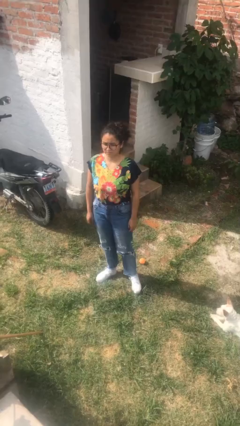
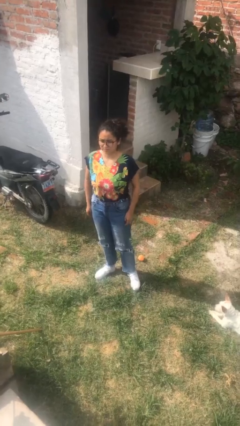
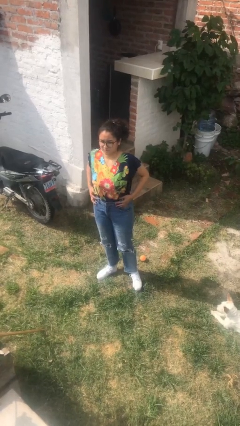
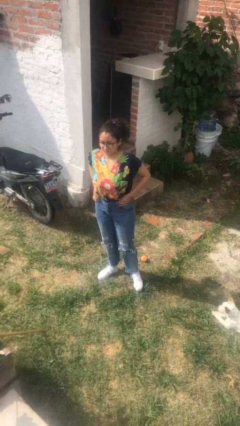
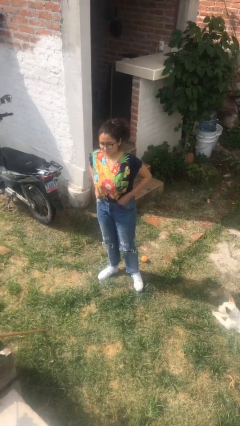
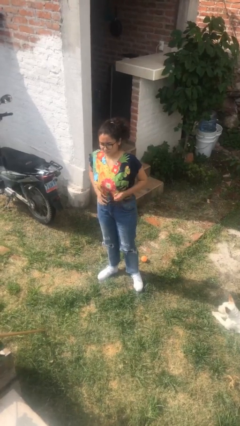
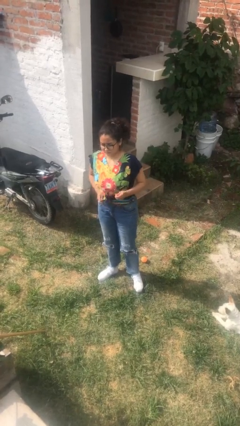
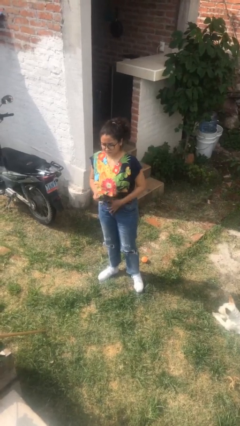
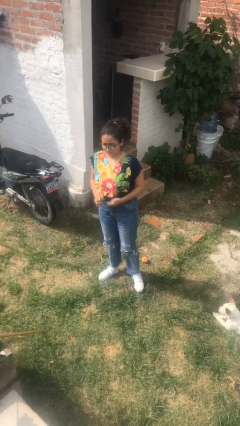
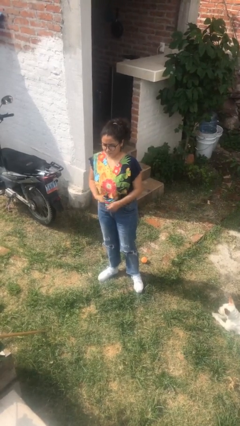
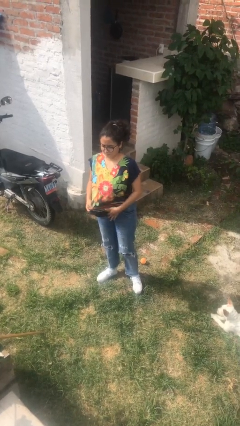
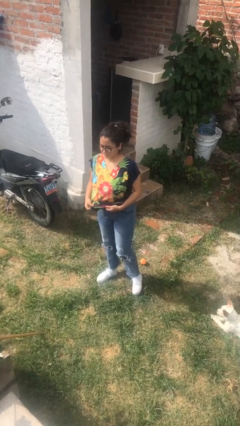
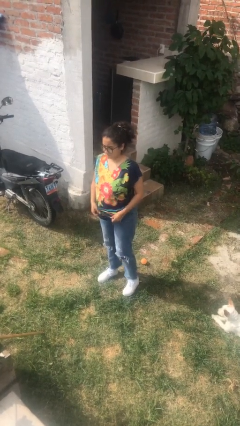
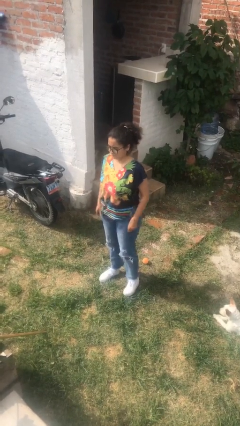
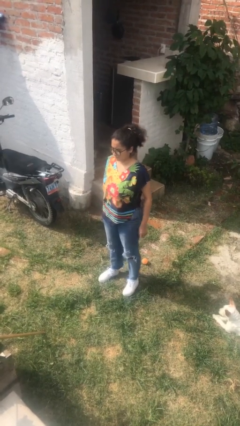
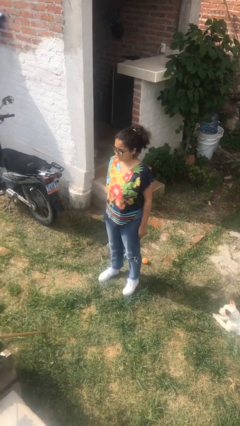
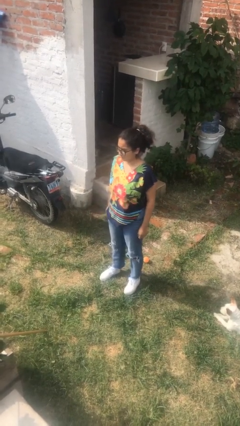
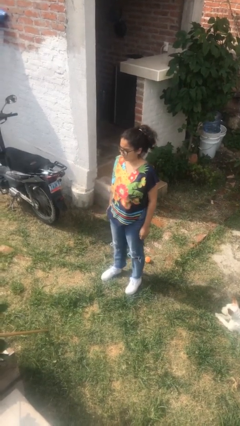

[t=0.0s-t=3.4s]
person untucks shirt

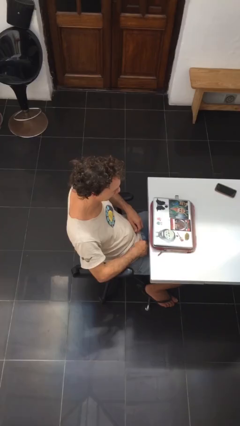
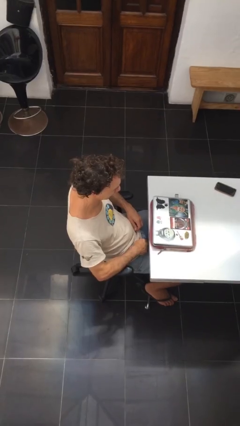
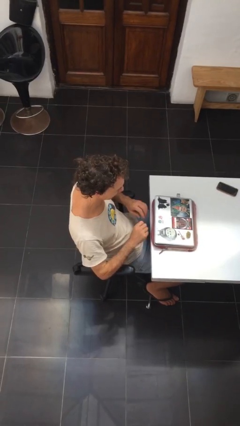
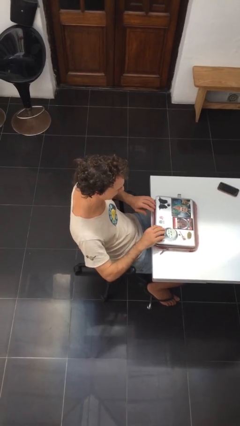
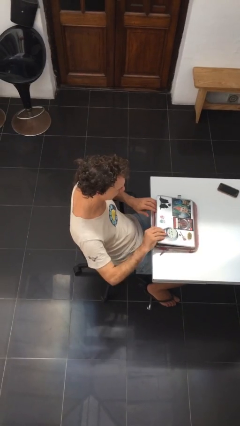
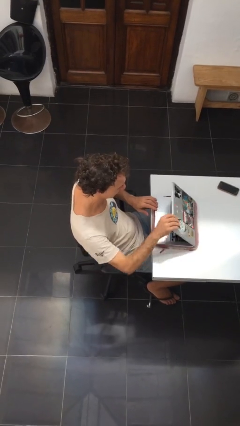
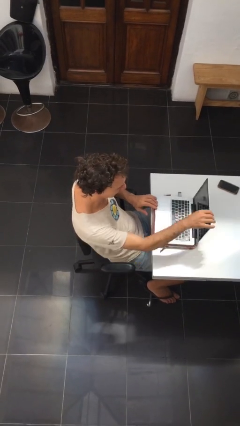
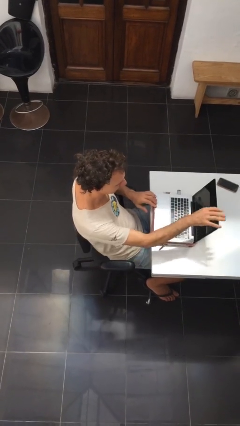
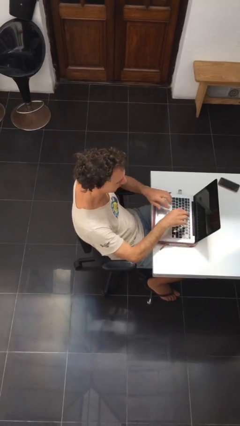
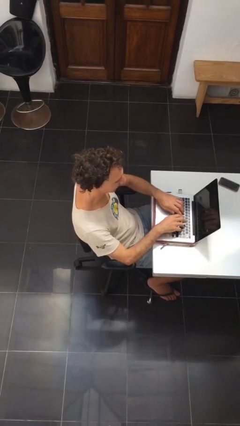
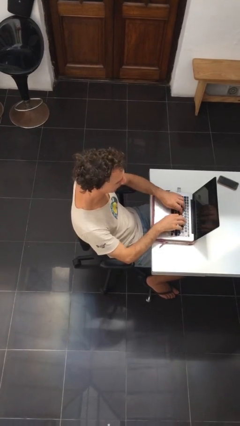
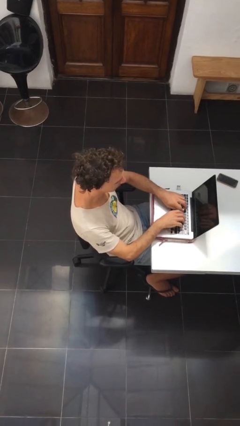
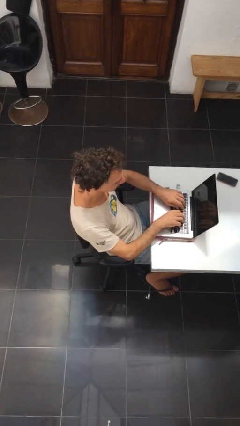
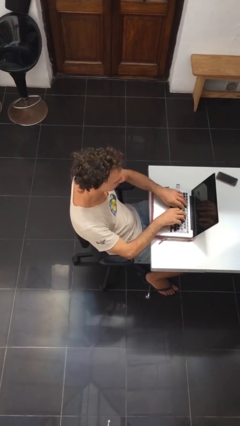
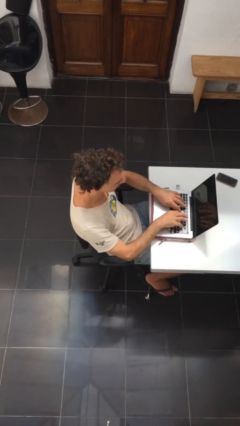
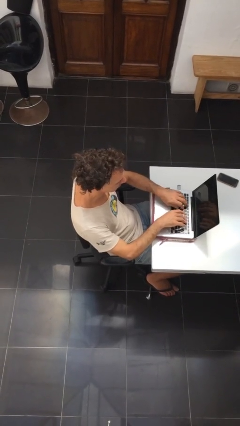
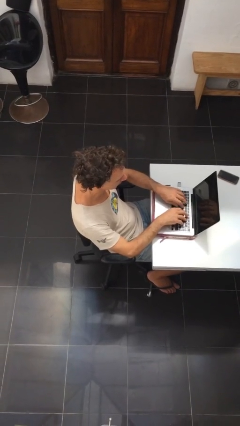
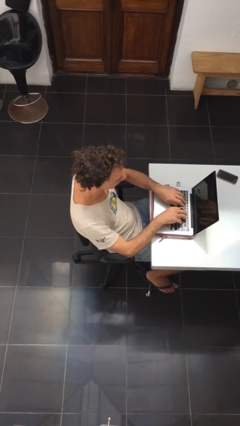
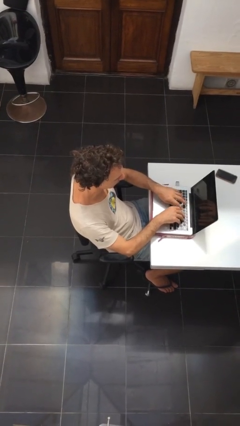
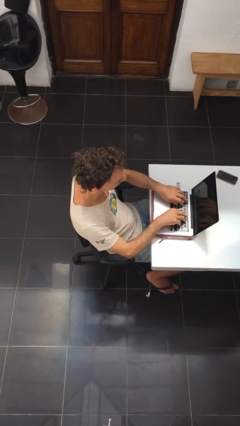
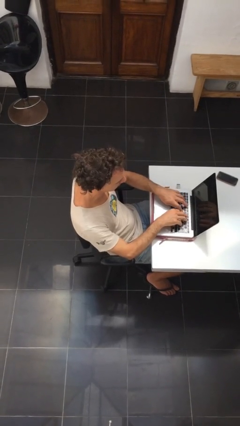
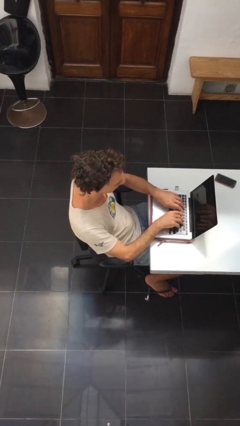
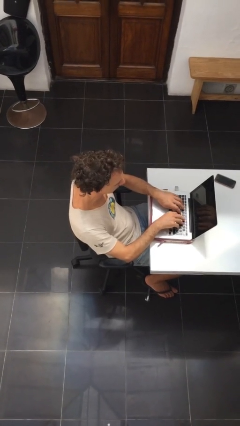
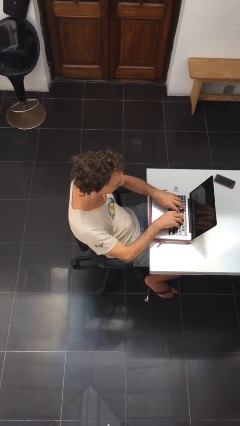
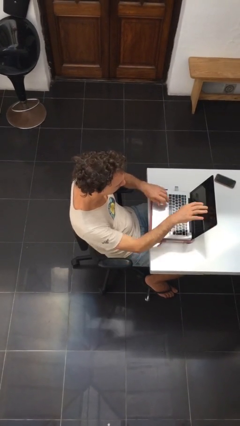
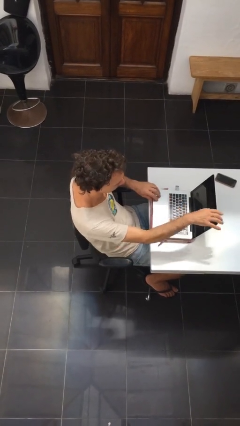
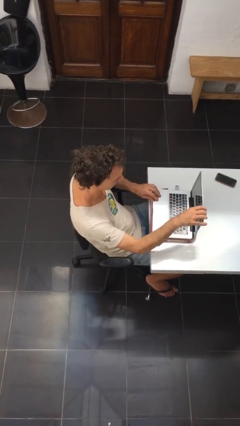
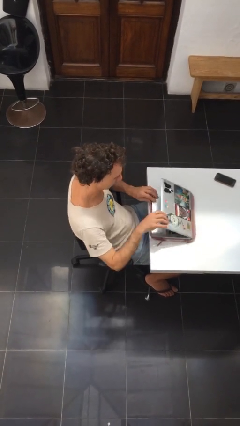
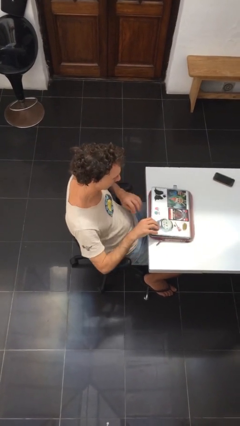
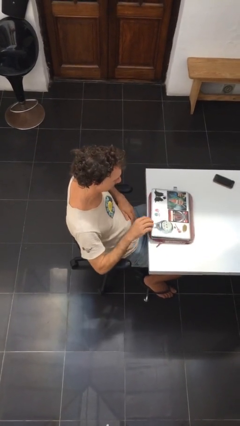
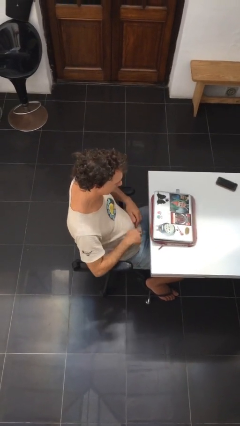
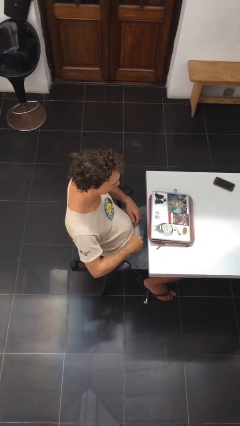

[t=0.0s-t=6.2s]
person interacts with laptop

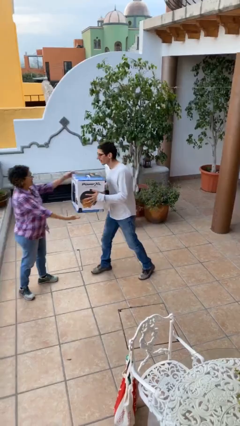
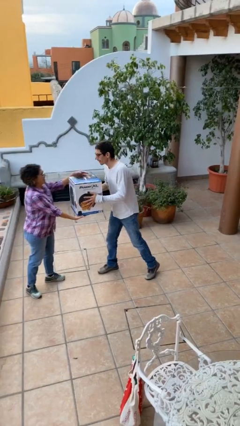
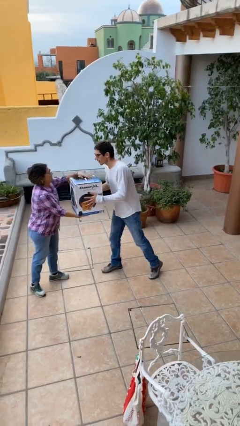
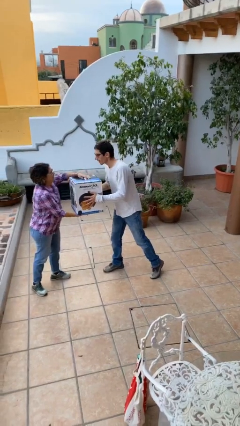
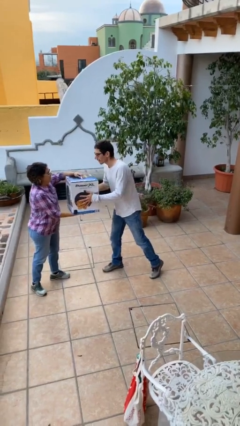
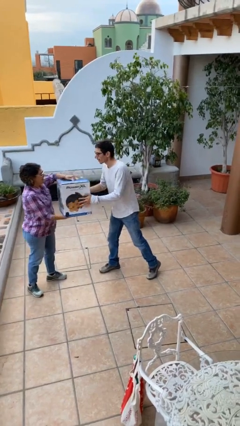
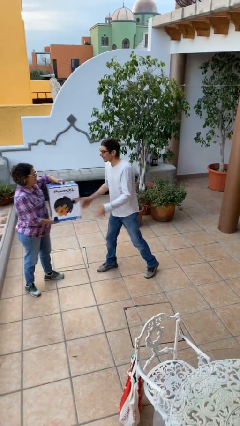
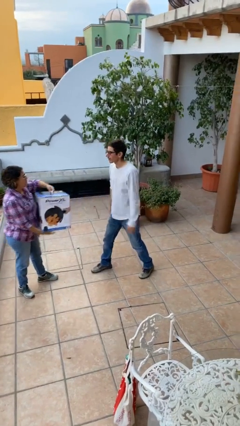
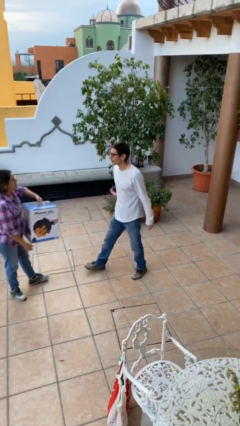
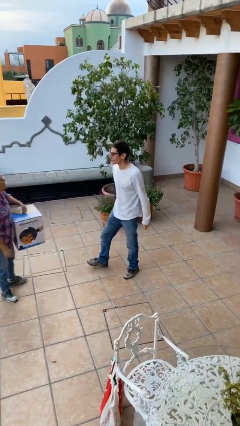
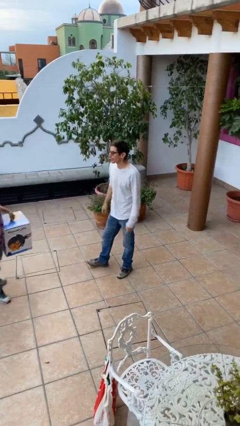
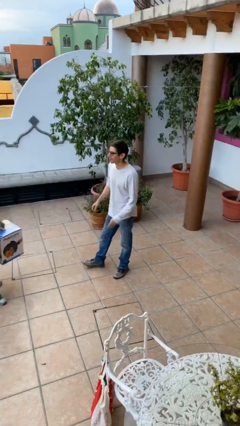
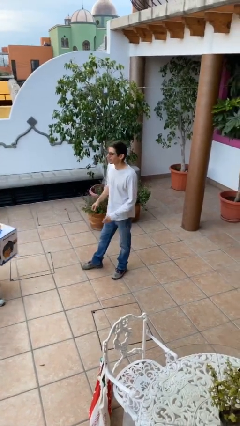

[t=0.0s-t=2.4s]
person transfers object to person

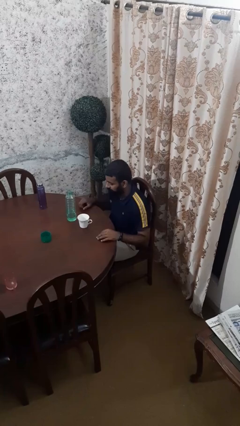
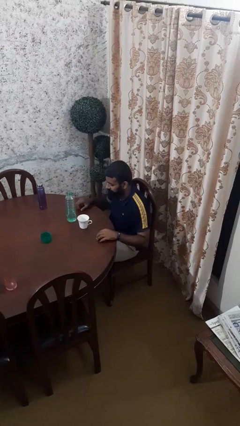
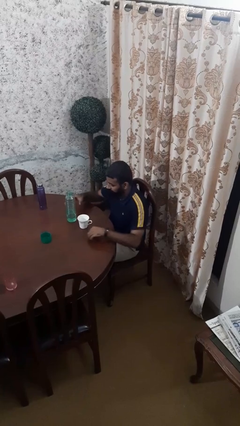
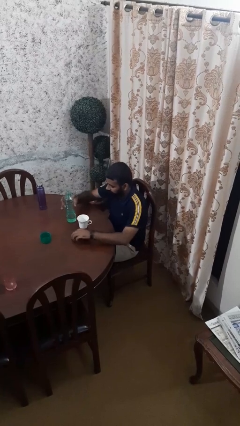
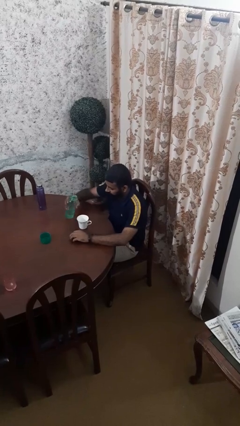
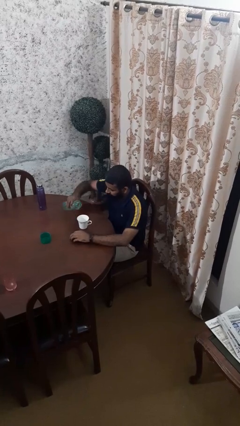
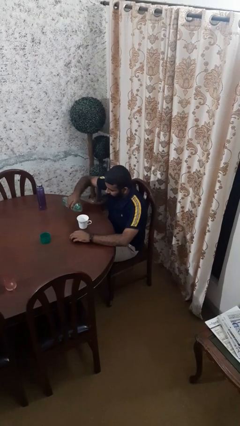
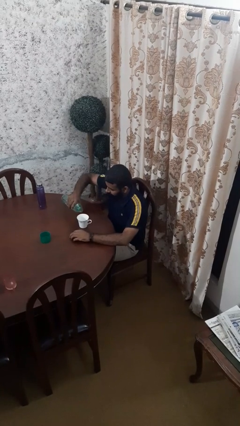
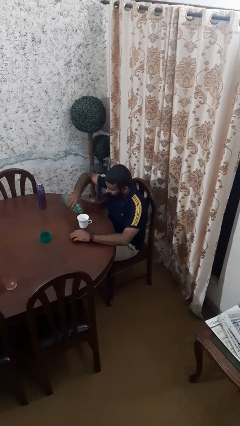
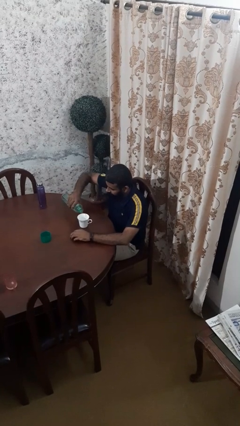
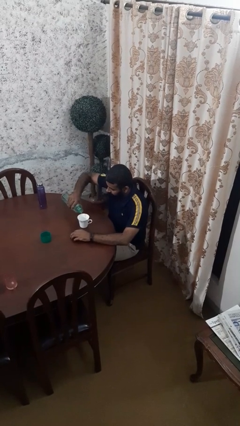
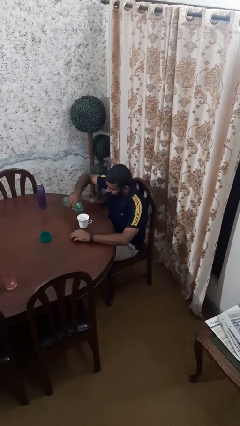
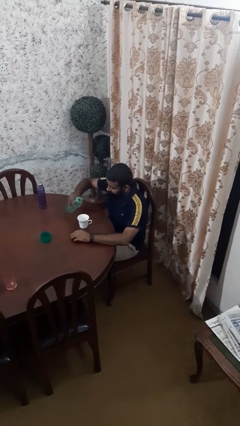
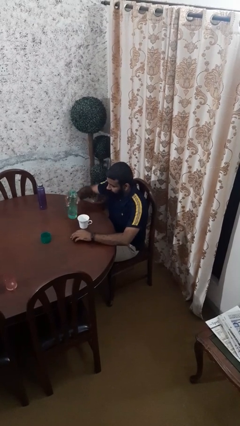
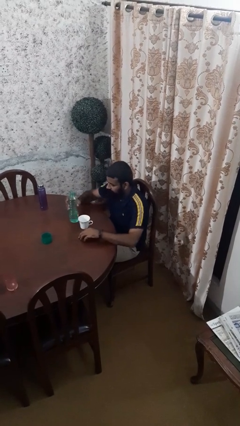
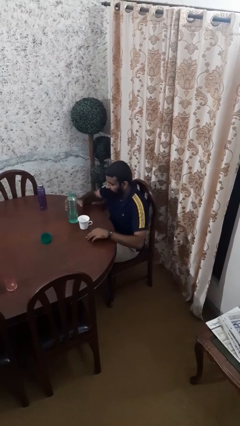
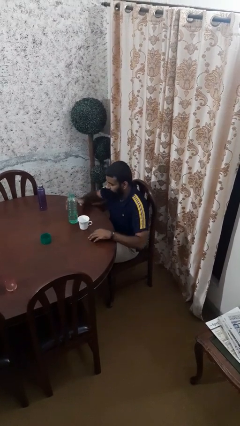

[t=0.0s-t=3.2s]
person pours liquid into cup

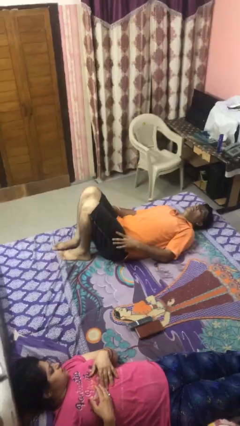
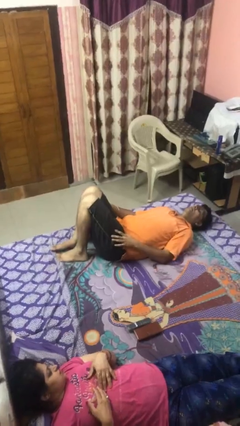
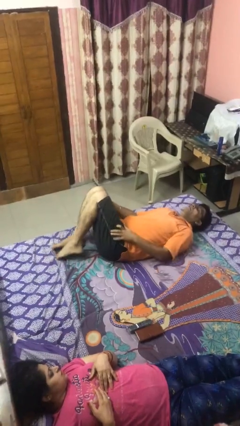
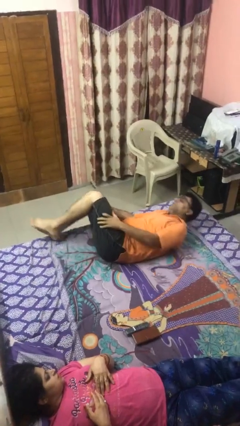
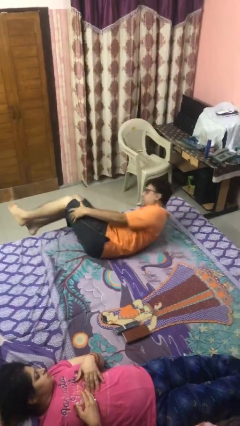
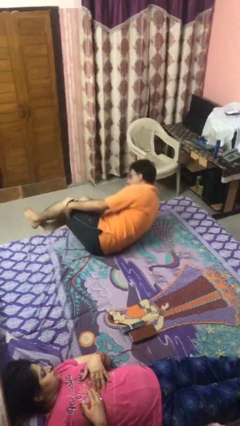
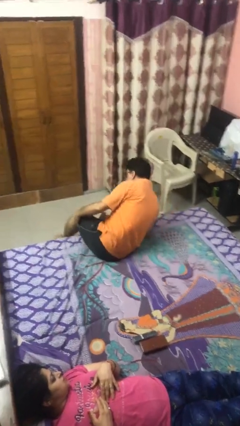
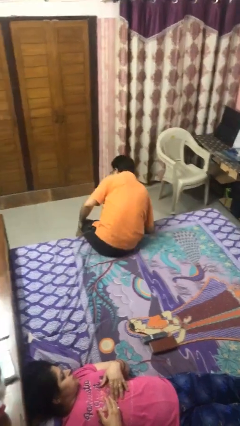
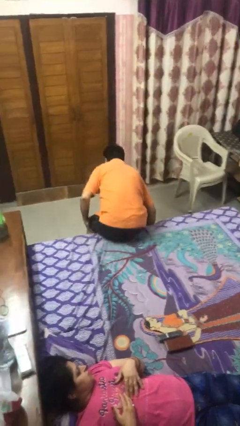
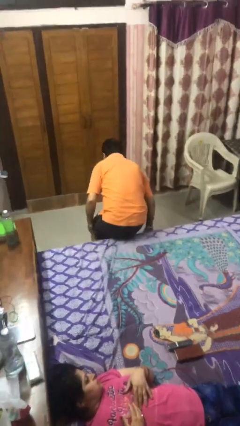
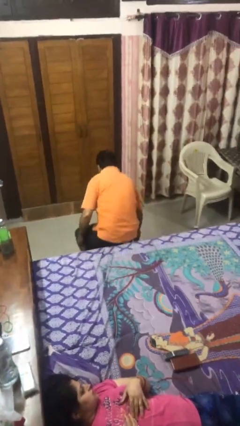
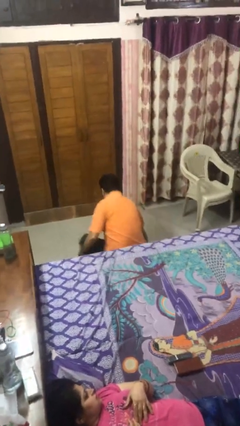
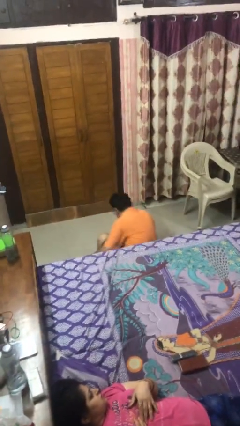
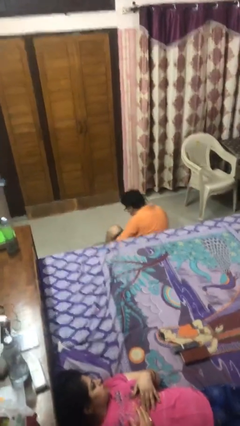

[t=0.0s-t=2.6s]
person falls from bed
